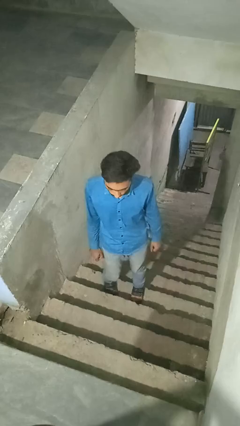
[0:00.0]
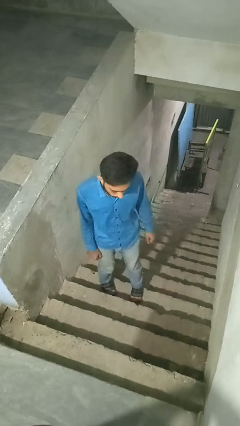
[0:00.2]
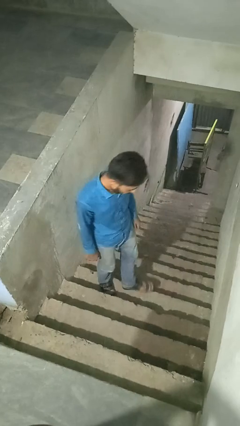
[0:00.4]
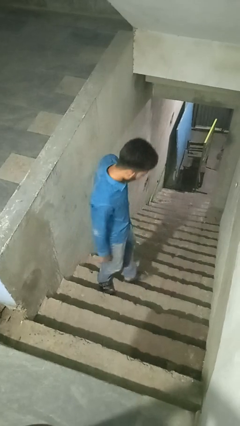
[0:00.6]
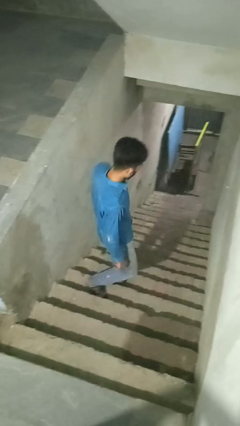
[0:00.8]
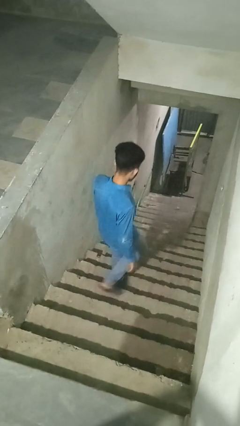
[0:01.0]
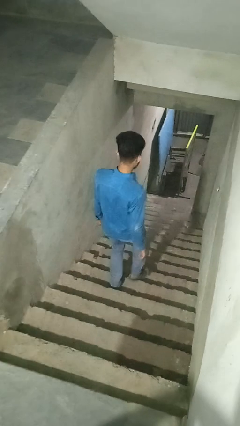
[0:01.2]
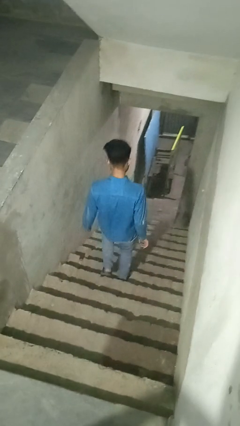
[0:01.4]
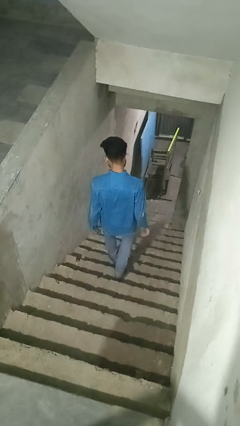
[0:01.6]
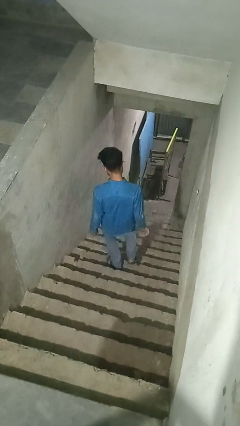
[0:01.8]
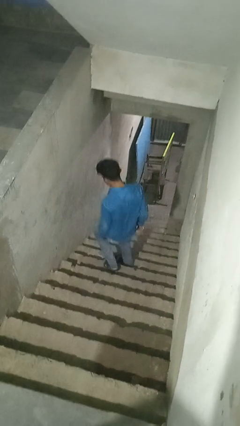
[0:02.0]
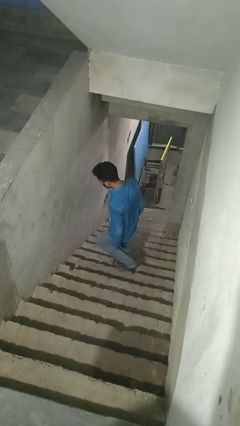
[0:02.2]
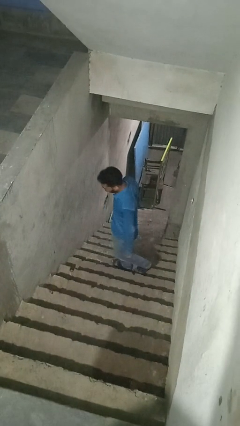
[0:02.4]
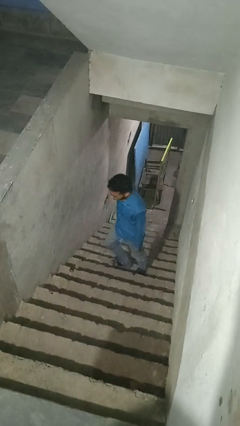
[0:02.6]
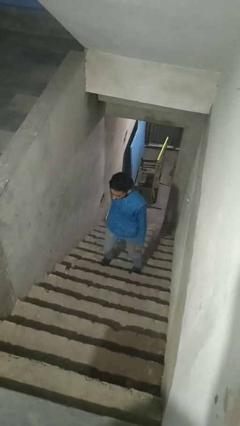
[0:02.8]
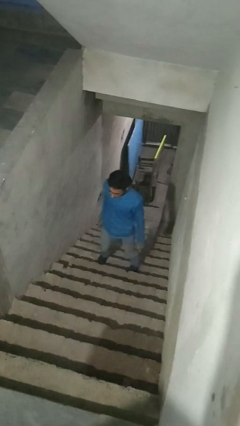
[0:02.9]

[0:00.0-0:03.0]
person climbs down stairs

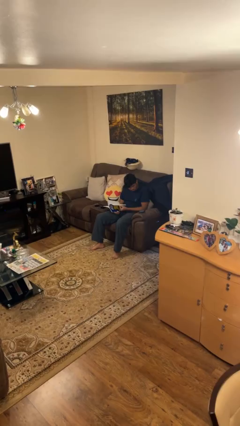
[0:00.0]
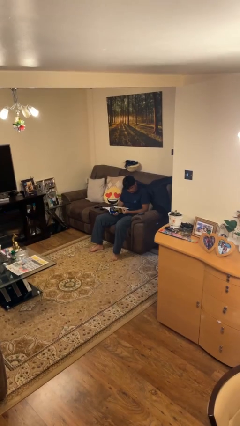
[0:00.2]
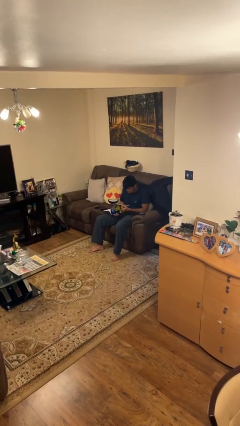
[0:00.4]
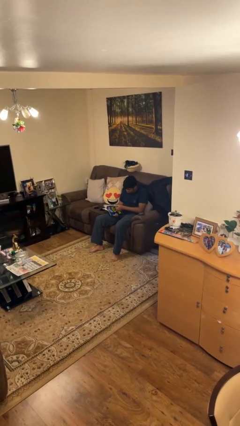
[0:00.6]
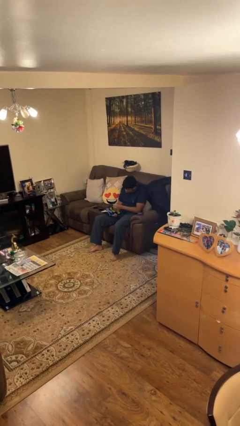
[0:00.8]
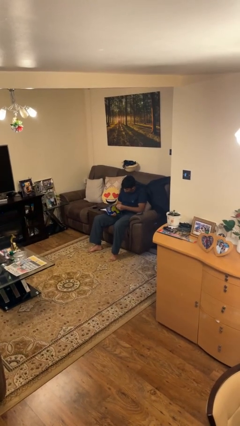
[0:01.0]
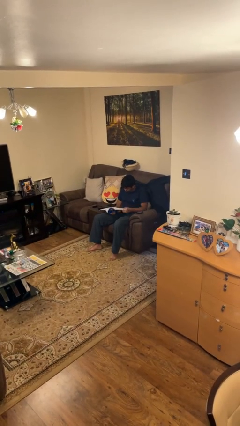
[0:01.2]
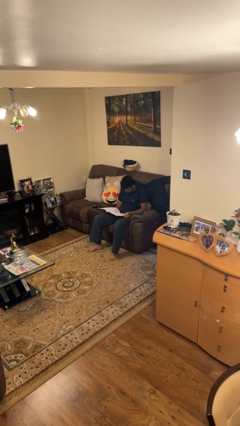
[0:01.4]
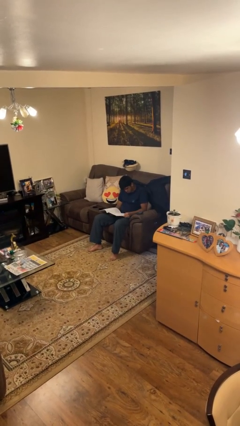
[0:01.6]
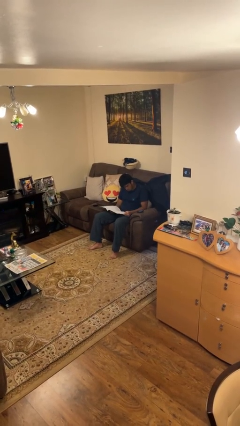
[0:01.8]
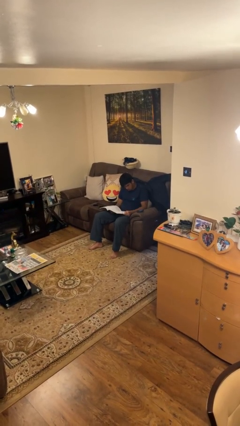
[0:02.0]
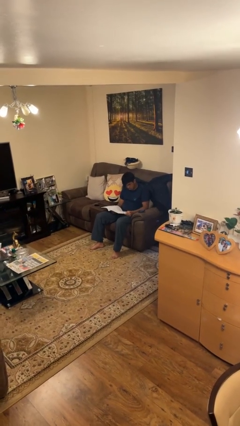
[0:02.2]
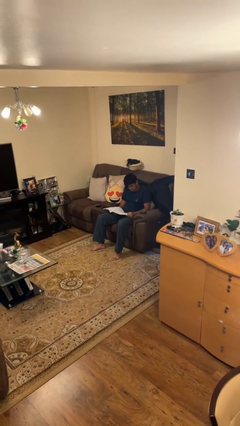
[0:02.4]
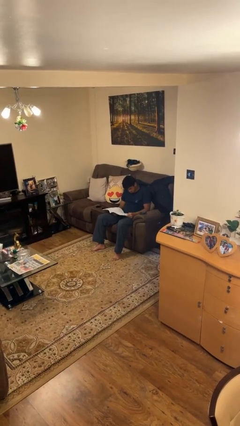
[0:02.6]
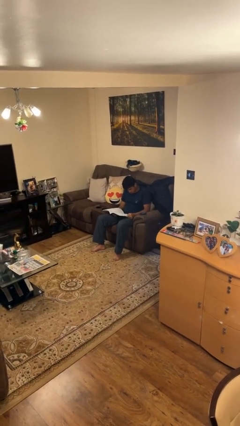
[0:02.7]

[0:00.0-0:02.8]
person reads magazine

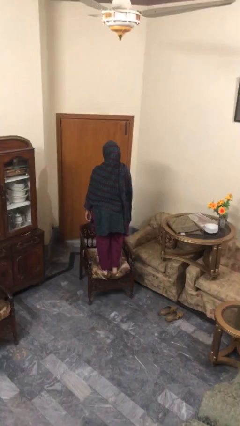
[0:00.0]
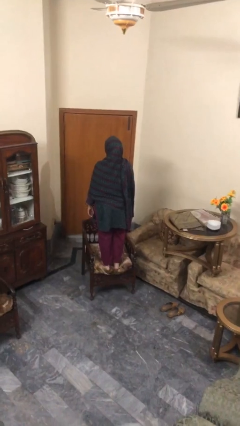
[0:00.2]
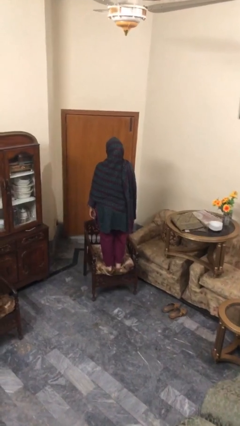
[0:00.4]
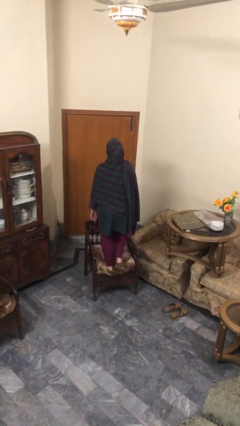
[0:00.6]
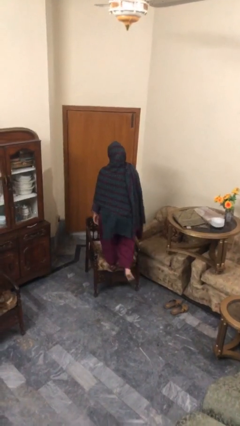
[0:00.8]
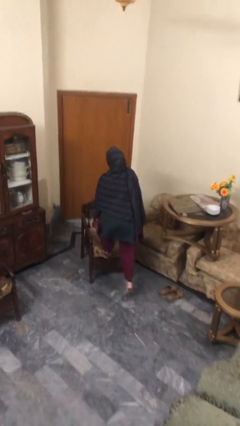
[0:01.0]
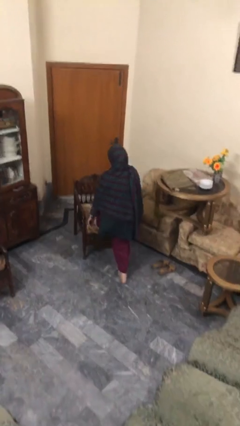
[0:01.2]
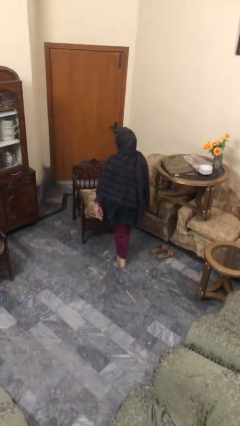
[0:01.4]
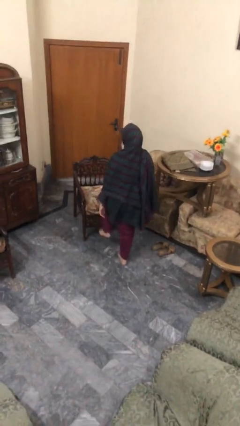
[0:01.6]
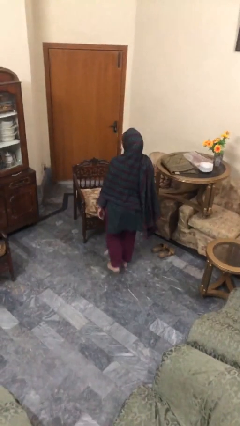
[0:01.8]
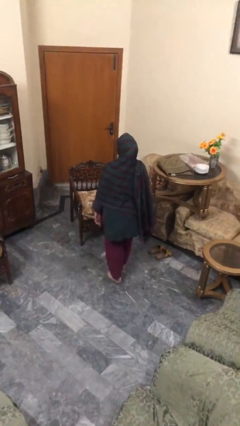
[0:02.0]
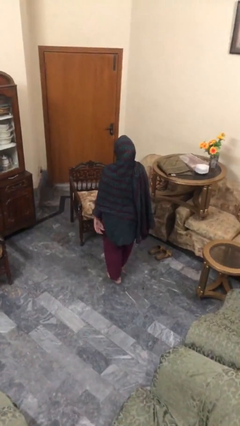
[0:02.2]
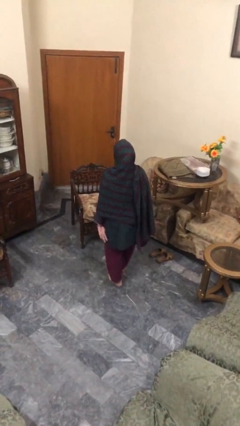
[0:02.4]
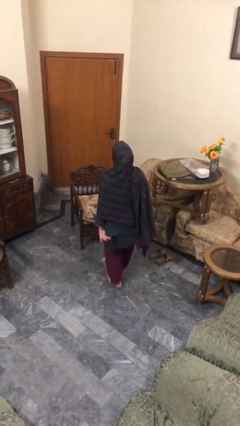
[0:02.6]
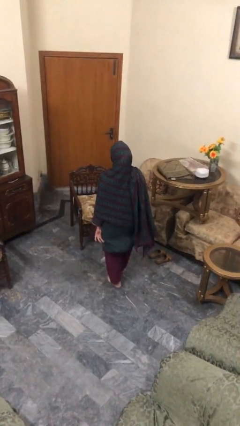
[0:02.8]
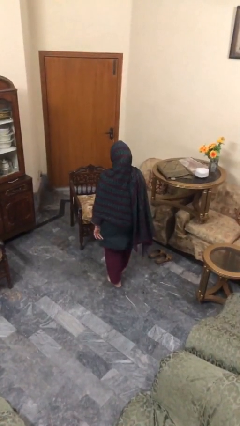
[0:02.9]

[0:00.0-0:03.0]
person climbs off chair

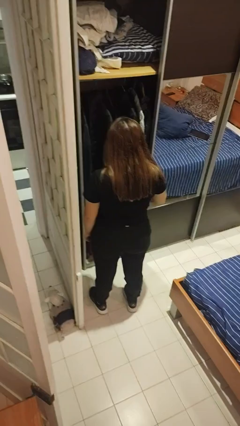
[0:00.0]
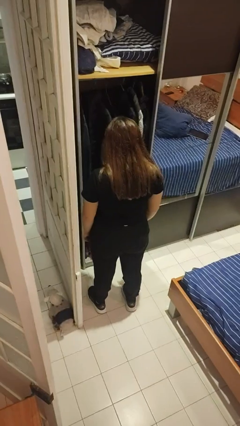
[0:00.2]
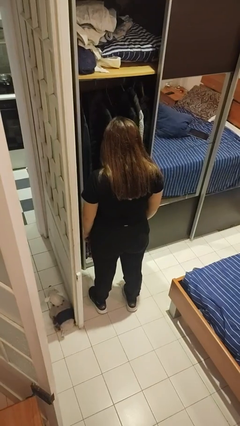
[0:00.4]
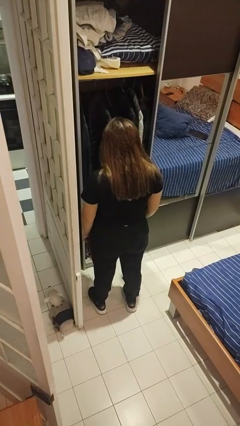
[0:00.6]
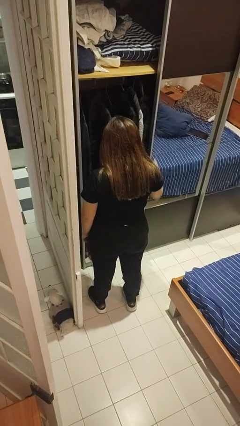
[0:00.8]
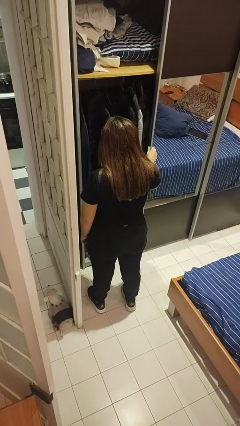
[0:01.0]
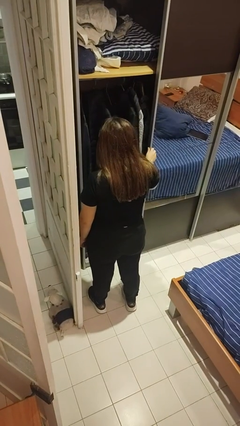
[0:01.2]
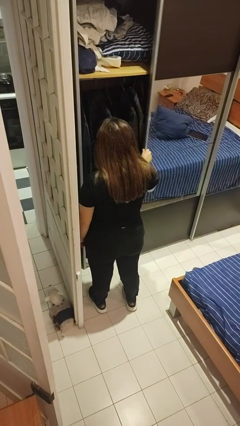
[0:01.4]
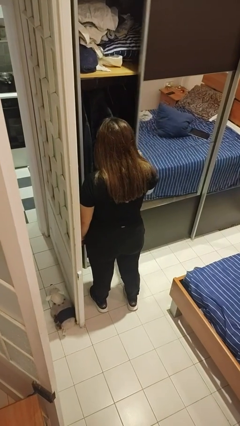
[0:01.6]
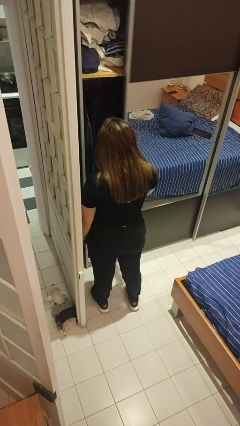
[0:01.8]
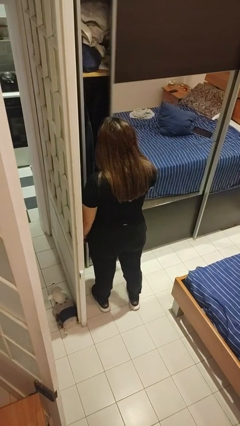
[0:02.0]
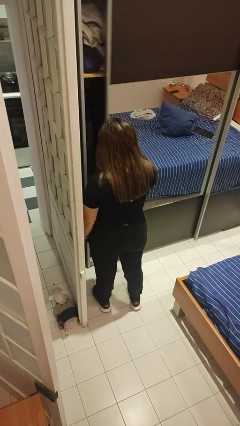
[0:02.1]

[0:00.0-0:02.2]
person closes dresser drawer

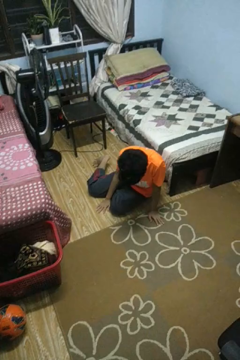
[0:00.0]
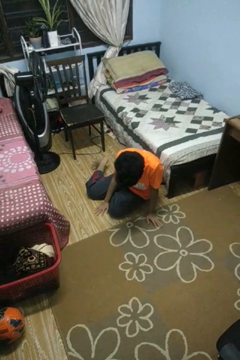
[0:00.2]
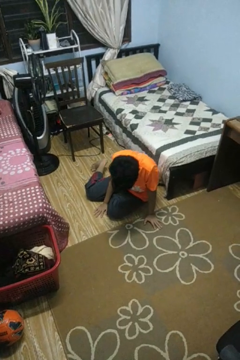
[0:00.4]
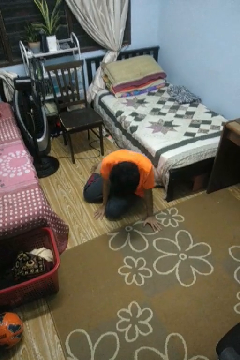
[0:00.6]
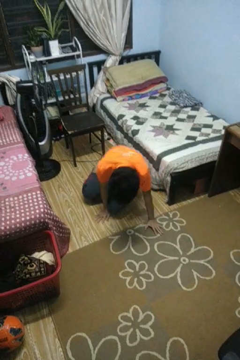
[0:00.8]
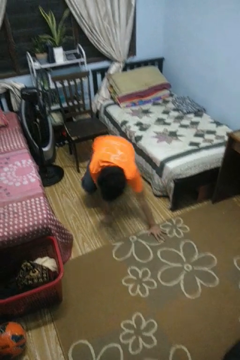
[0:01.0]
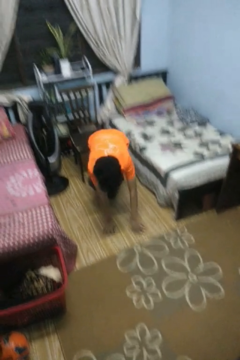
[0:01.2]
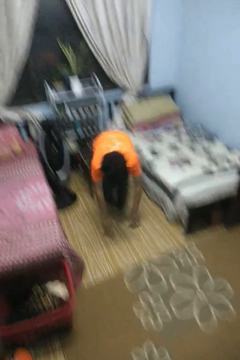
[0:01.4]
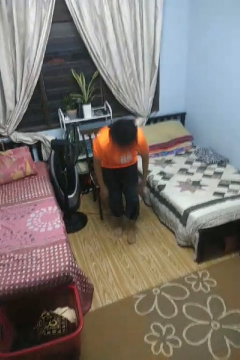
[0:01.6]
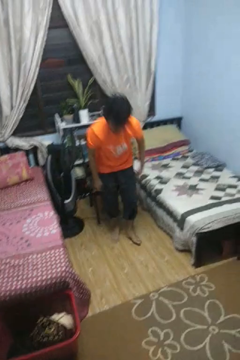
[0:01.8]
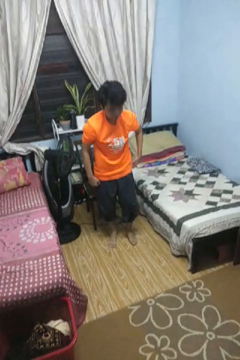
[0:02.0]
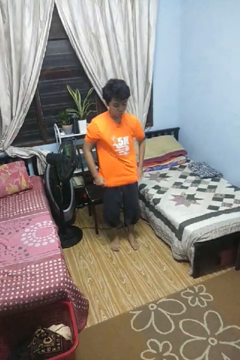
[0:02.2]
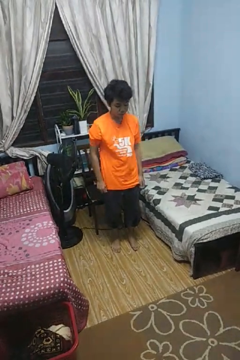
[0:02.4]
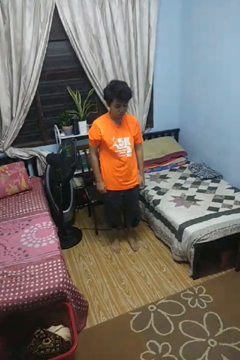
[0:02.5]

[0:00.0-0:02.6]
person stands up from floor

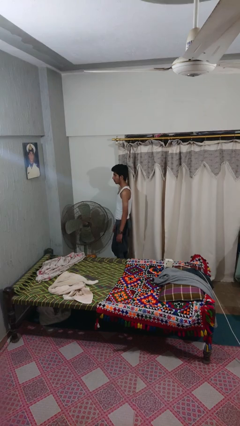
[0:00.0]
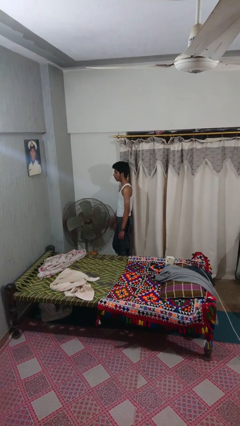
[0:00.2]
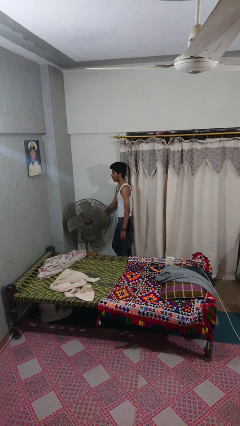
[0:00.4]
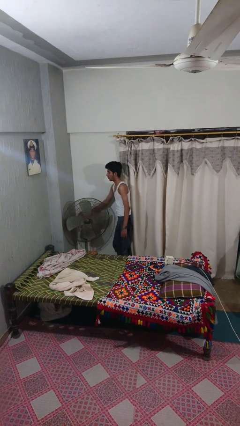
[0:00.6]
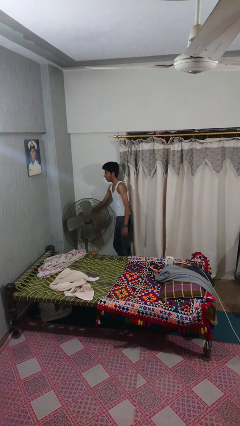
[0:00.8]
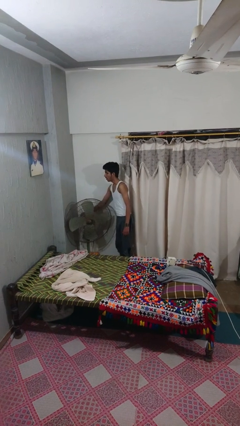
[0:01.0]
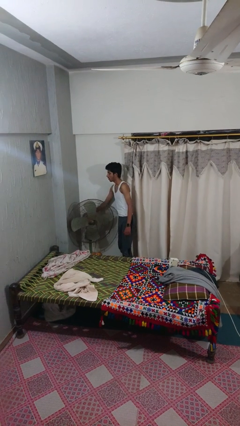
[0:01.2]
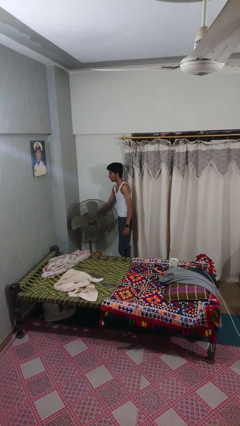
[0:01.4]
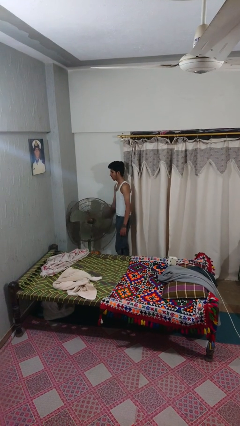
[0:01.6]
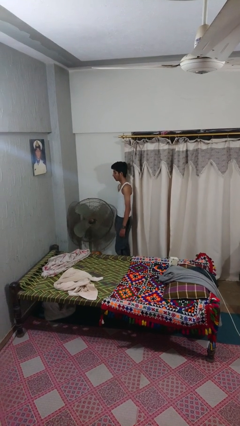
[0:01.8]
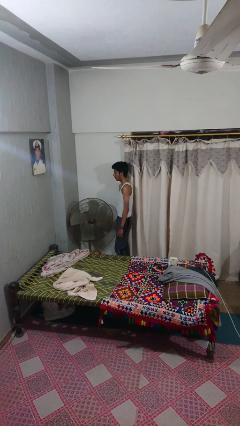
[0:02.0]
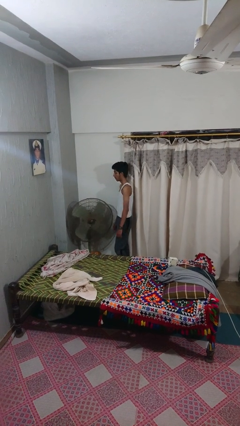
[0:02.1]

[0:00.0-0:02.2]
person turns on fan

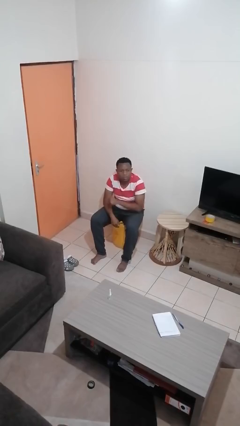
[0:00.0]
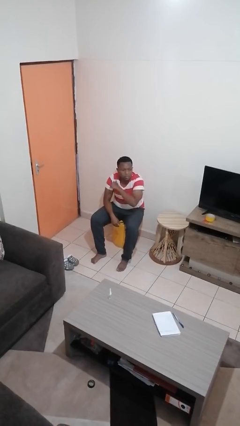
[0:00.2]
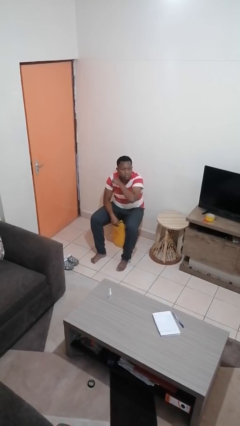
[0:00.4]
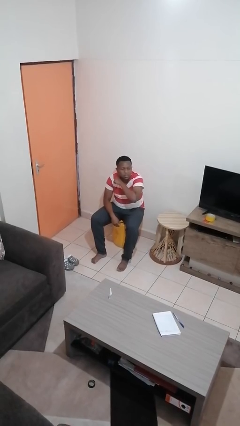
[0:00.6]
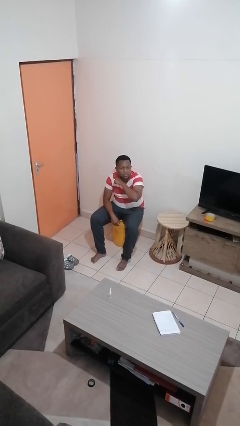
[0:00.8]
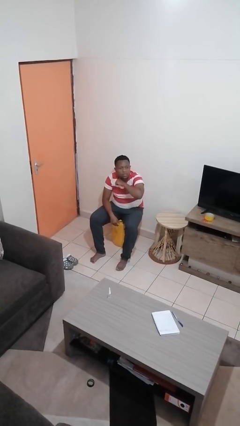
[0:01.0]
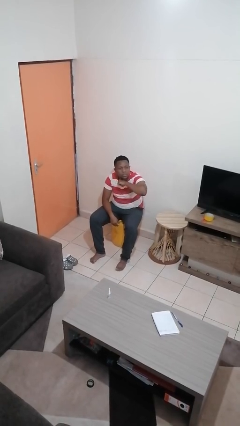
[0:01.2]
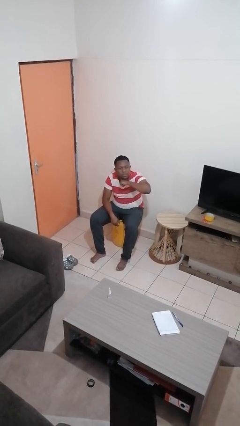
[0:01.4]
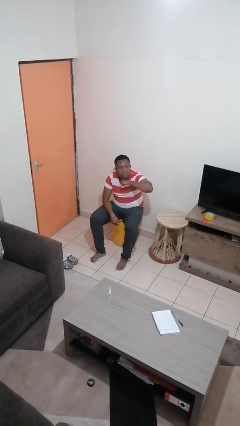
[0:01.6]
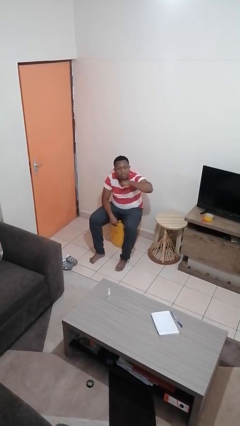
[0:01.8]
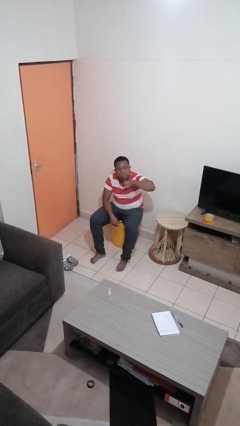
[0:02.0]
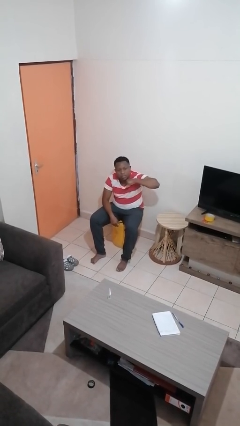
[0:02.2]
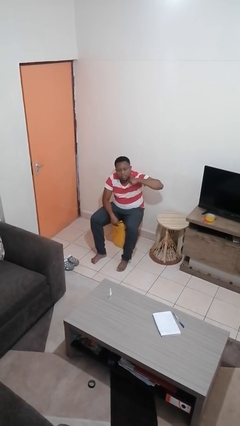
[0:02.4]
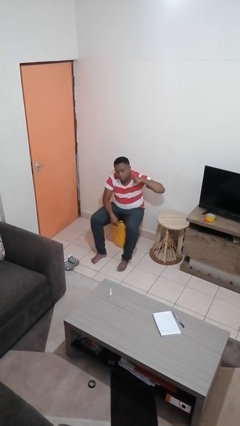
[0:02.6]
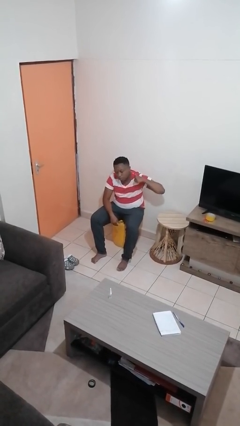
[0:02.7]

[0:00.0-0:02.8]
person gestures cut
